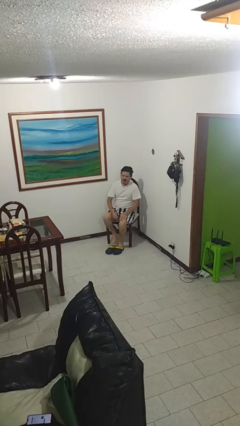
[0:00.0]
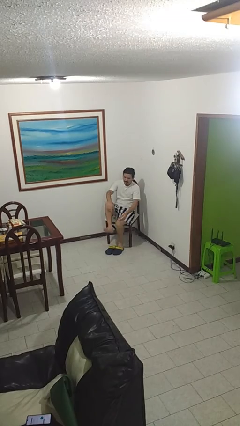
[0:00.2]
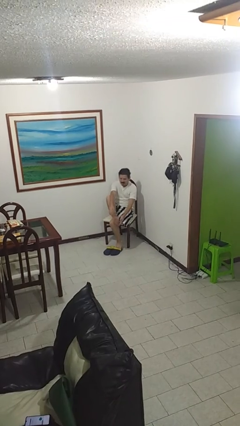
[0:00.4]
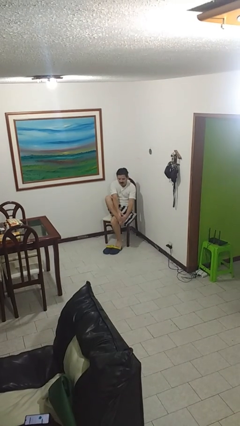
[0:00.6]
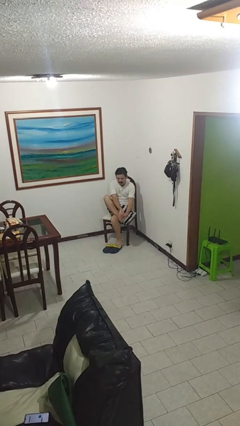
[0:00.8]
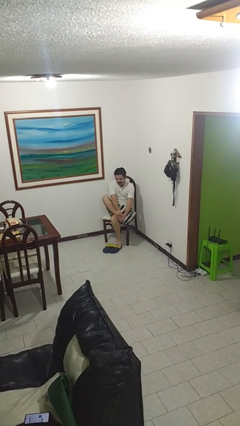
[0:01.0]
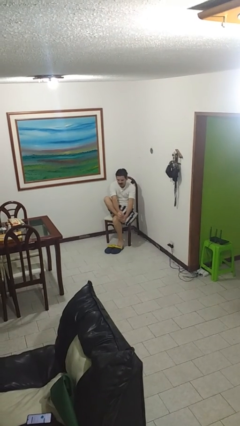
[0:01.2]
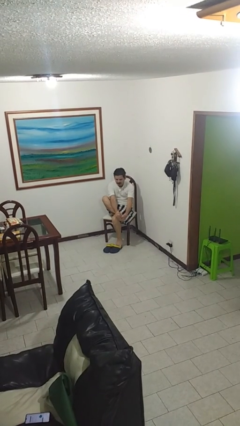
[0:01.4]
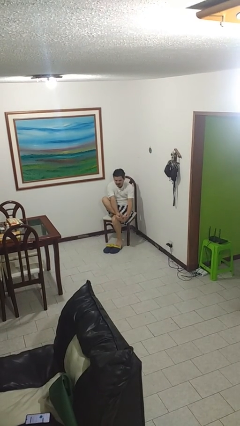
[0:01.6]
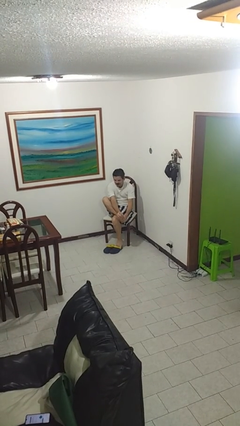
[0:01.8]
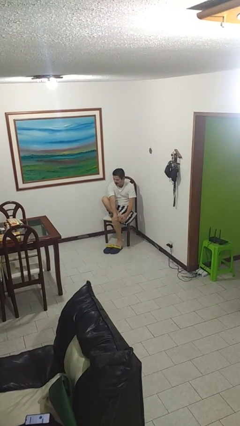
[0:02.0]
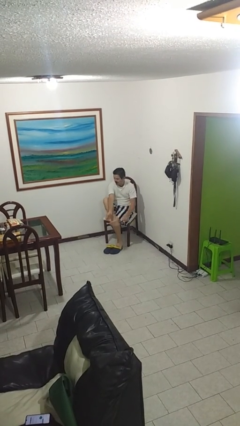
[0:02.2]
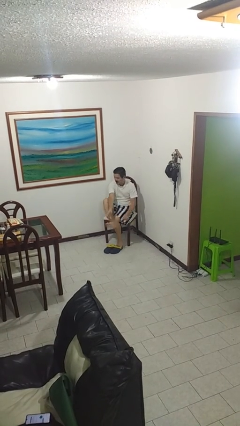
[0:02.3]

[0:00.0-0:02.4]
person rubs foot

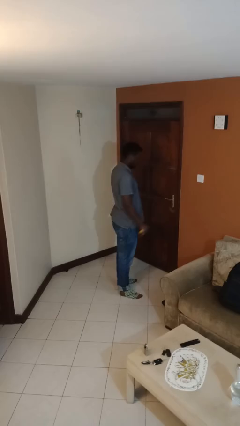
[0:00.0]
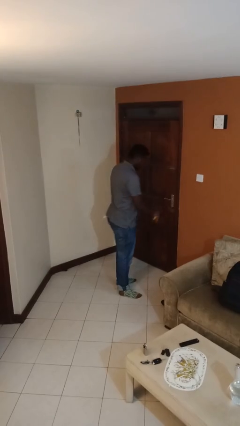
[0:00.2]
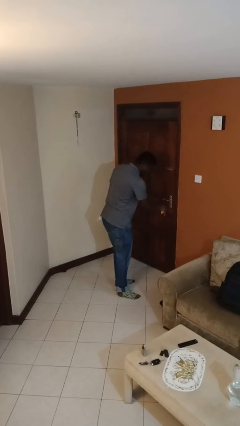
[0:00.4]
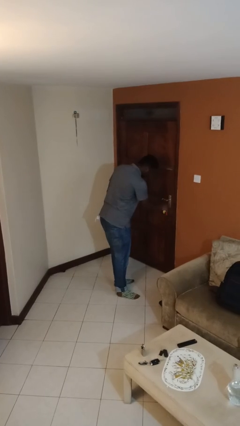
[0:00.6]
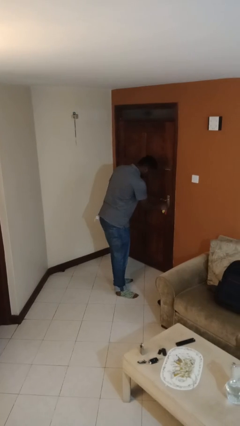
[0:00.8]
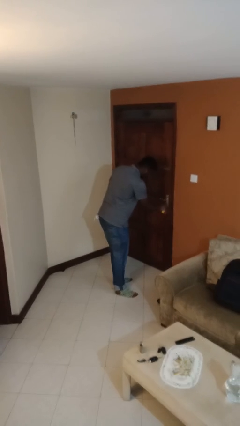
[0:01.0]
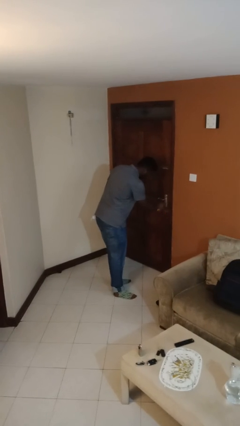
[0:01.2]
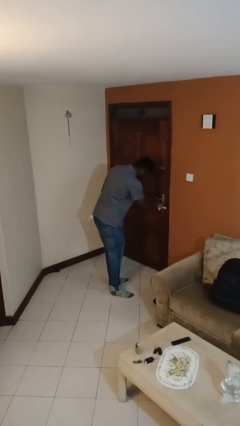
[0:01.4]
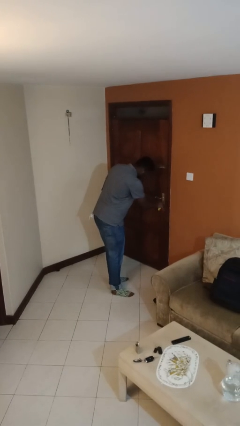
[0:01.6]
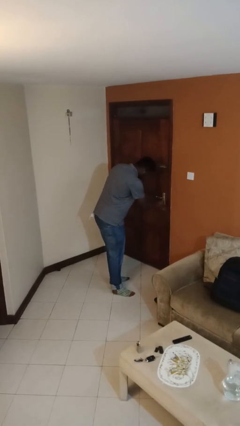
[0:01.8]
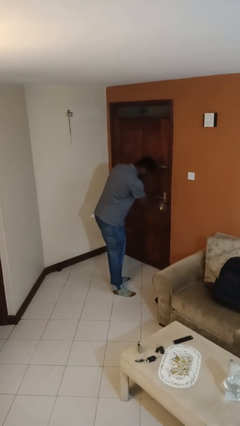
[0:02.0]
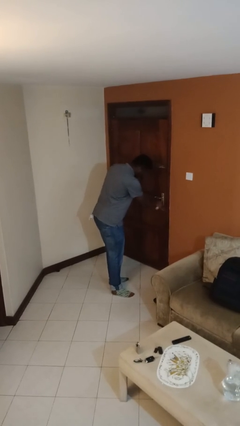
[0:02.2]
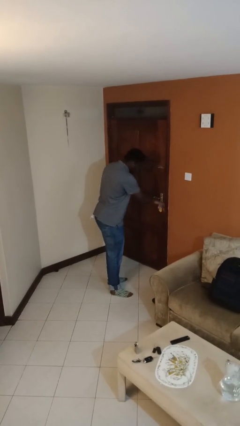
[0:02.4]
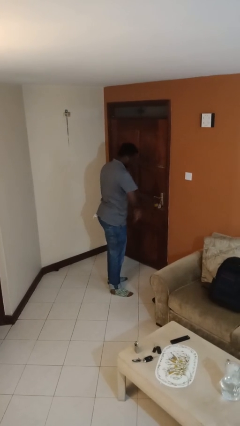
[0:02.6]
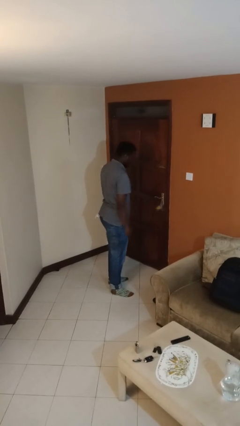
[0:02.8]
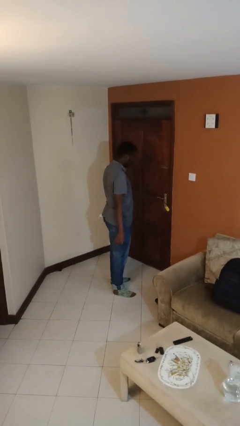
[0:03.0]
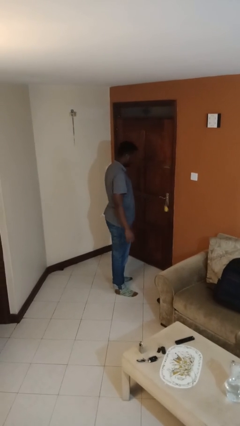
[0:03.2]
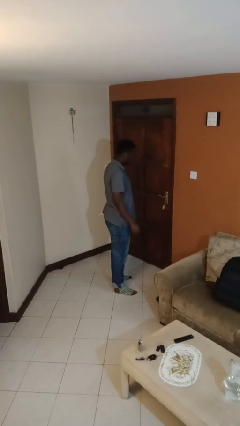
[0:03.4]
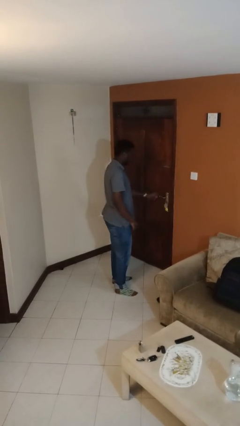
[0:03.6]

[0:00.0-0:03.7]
person unlocks door with keys

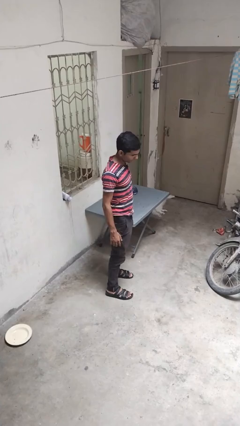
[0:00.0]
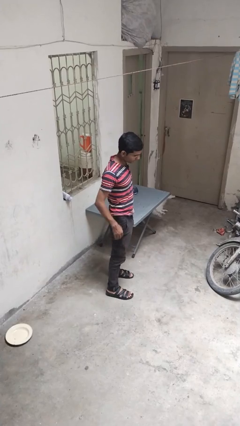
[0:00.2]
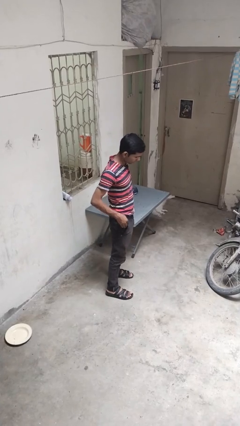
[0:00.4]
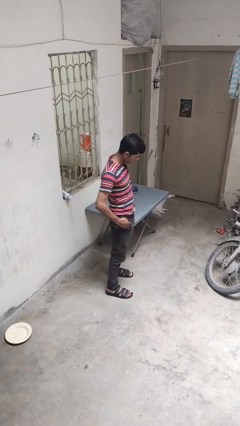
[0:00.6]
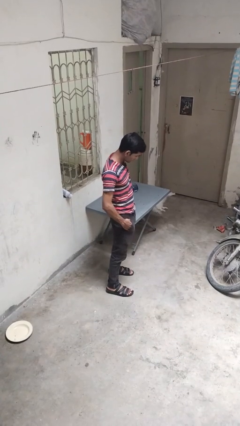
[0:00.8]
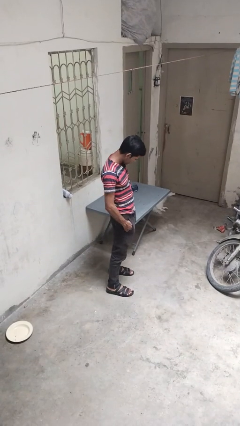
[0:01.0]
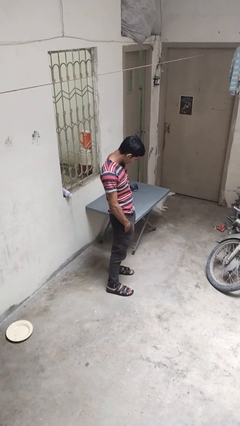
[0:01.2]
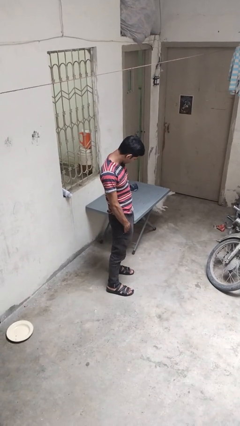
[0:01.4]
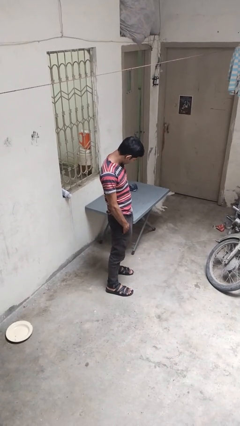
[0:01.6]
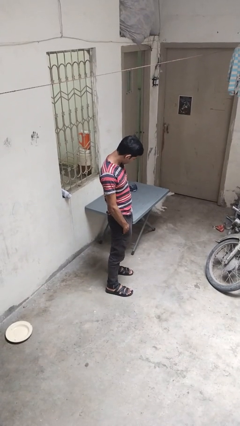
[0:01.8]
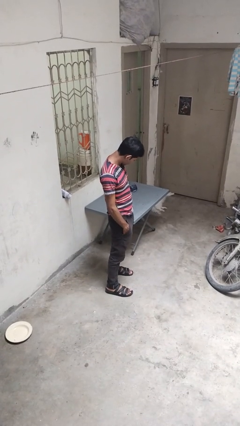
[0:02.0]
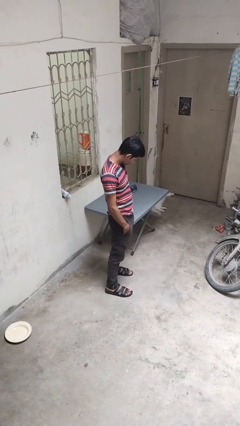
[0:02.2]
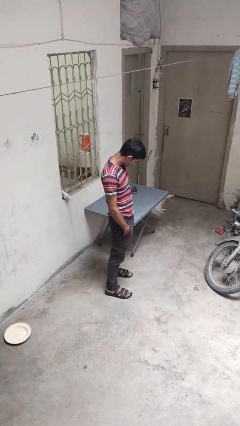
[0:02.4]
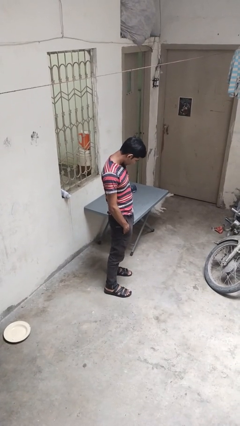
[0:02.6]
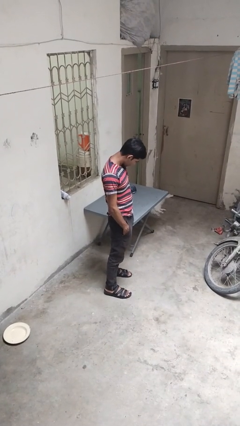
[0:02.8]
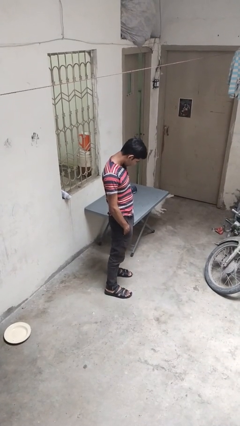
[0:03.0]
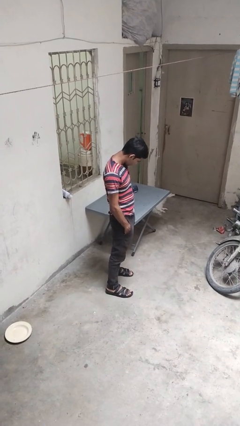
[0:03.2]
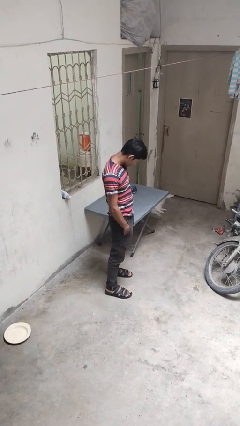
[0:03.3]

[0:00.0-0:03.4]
person puts hands in back pockets

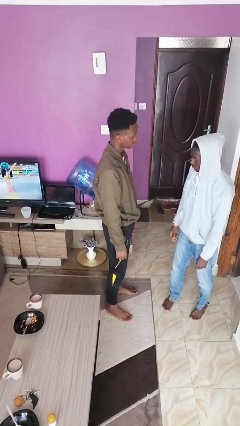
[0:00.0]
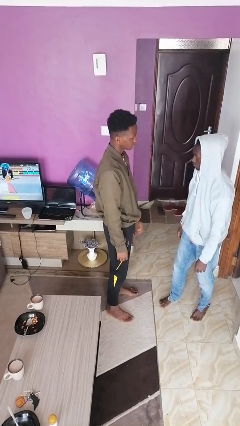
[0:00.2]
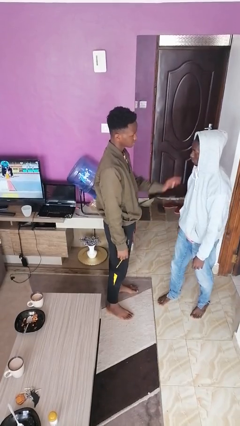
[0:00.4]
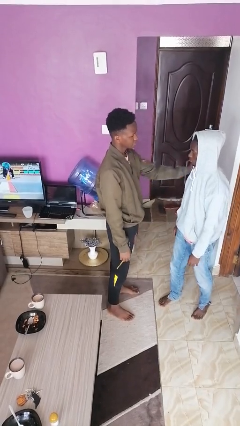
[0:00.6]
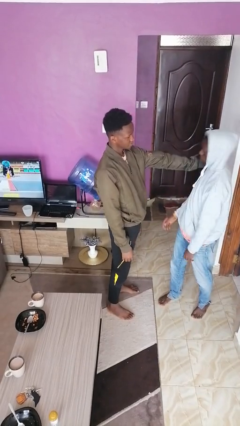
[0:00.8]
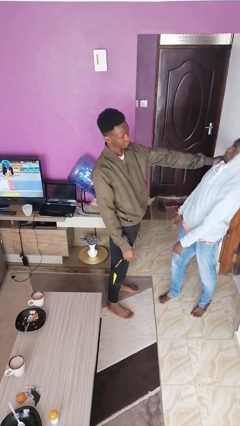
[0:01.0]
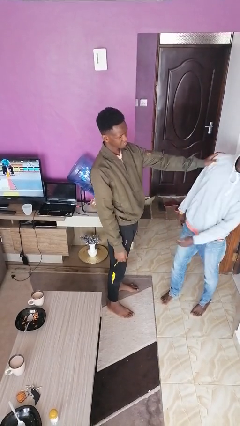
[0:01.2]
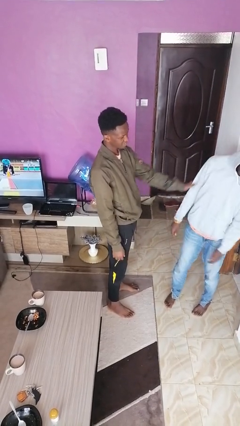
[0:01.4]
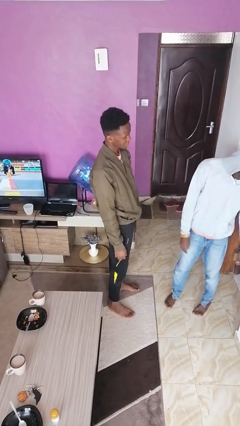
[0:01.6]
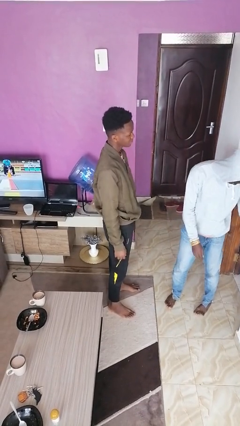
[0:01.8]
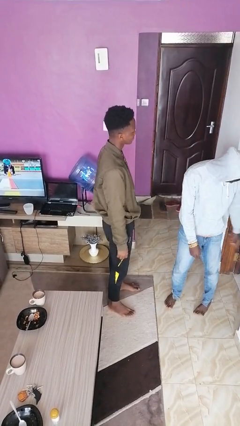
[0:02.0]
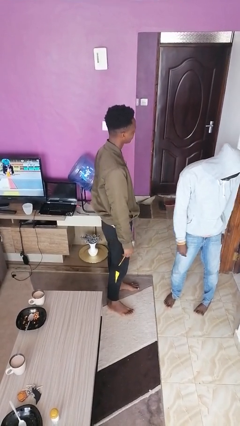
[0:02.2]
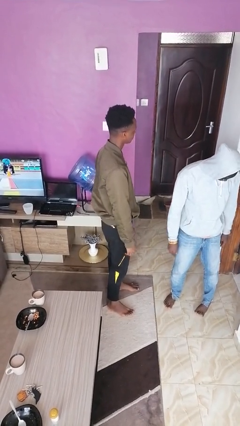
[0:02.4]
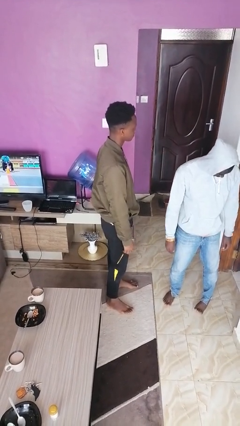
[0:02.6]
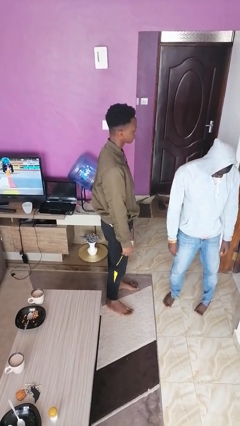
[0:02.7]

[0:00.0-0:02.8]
person shoves person

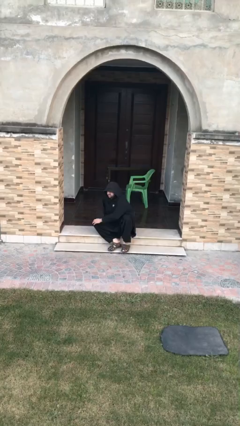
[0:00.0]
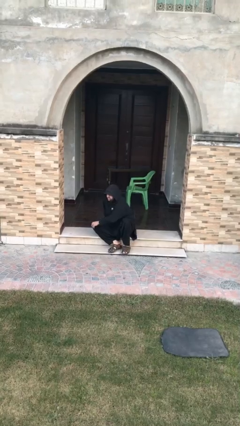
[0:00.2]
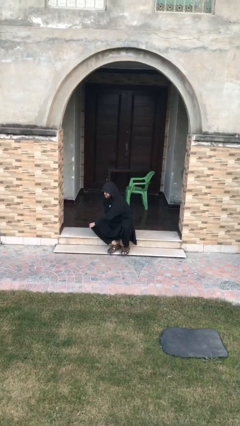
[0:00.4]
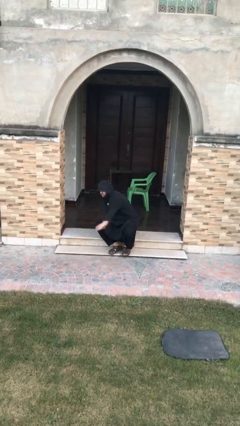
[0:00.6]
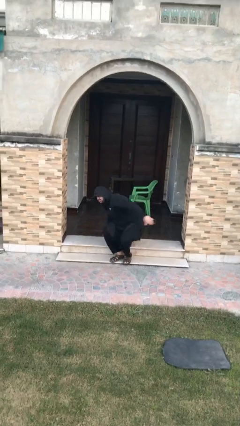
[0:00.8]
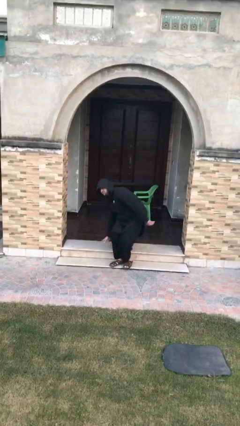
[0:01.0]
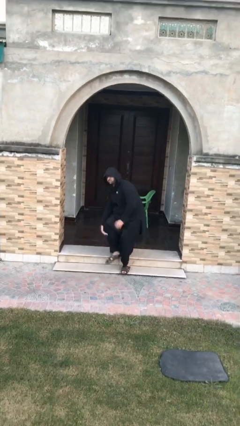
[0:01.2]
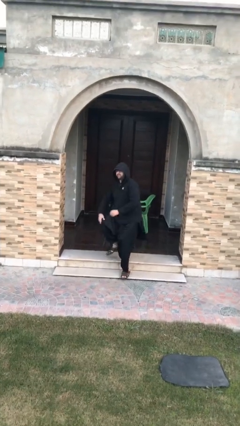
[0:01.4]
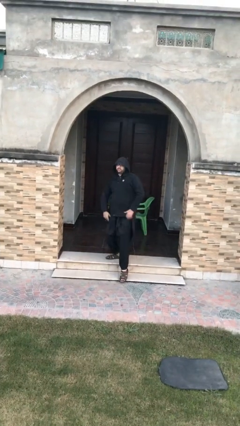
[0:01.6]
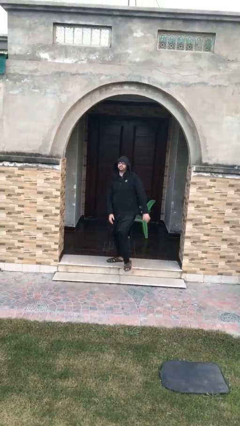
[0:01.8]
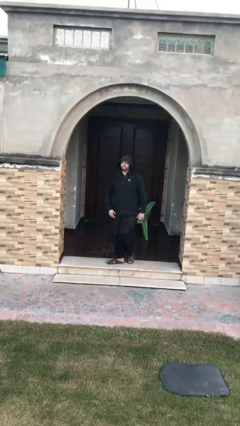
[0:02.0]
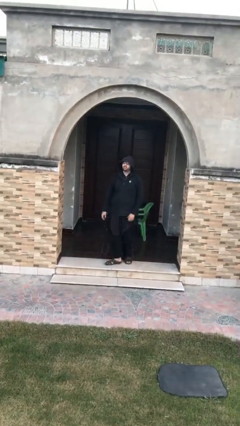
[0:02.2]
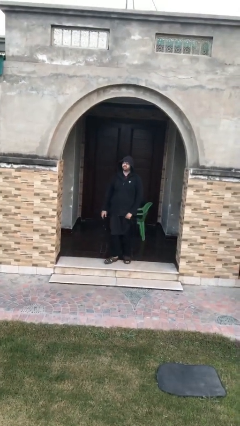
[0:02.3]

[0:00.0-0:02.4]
person stands up

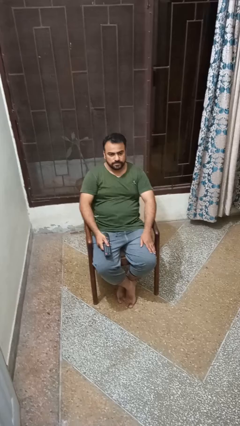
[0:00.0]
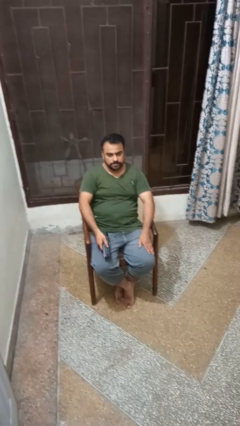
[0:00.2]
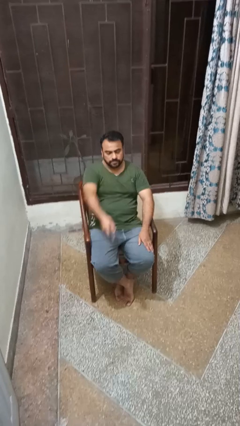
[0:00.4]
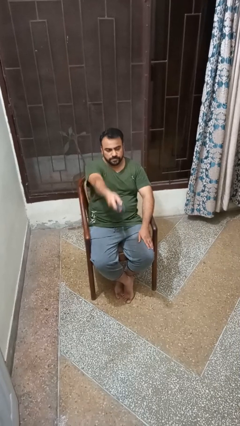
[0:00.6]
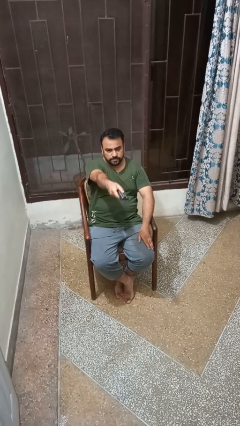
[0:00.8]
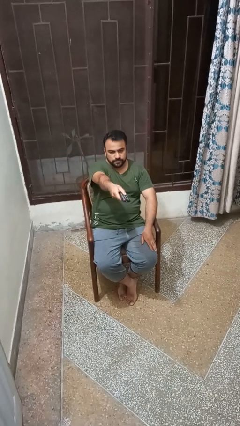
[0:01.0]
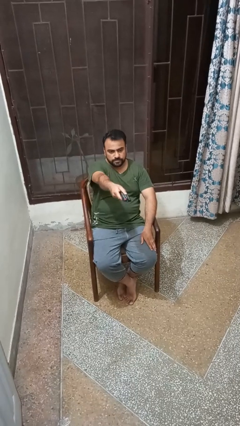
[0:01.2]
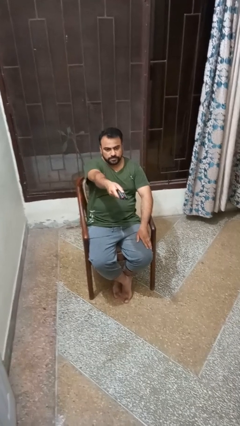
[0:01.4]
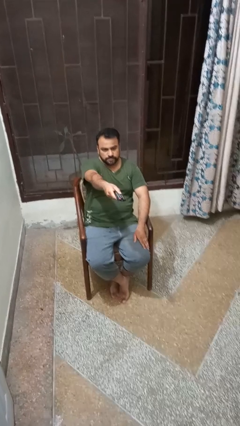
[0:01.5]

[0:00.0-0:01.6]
person uses television remote

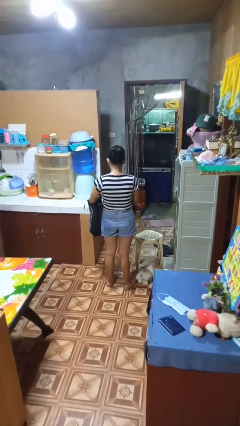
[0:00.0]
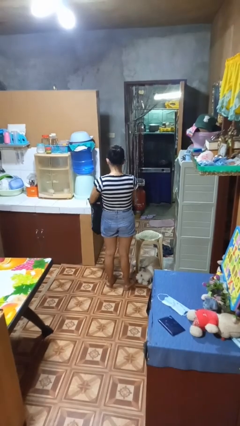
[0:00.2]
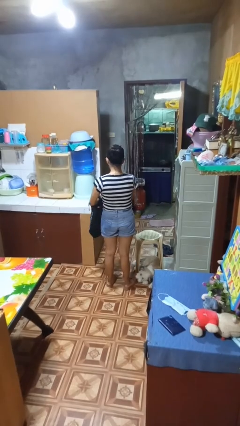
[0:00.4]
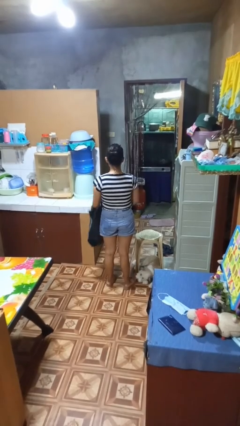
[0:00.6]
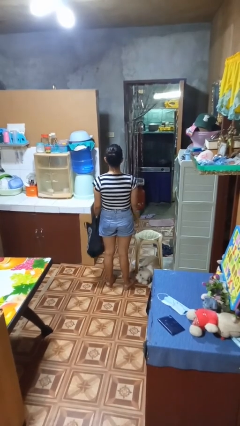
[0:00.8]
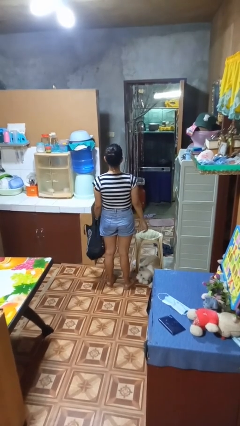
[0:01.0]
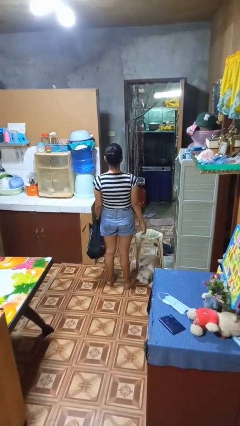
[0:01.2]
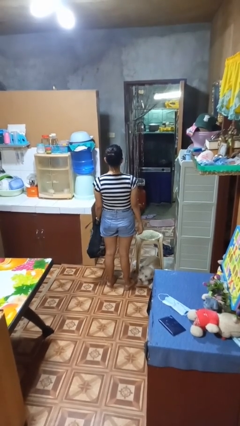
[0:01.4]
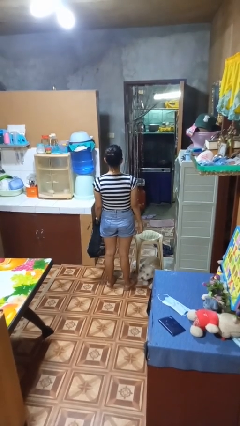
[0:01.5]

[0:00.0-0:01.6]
person puts object into bag
